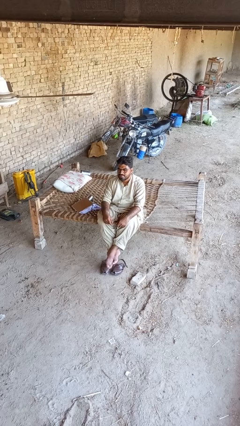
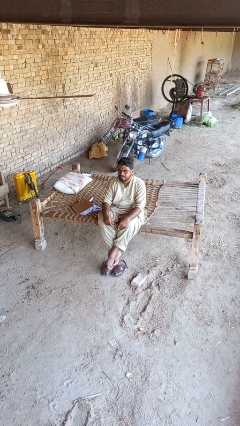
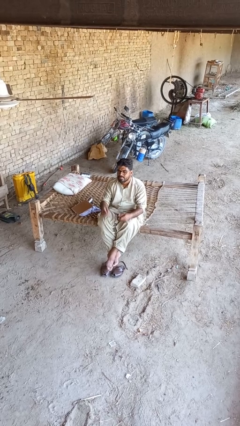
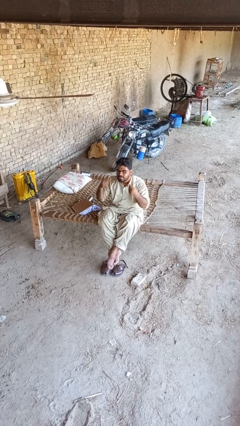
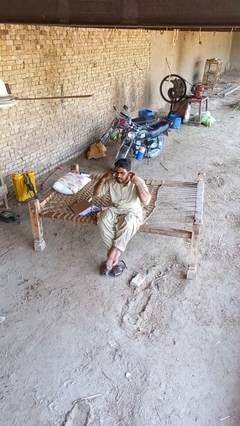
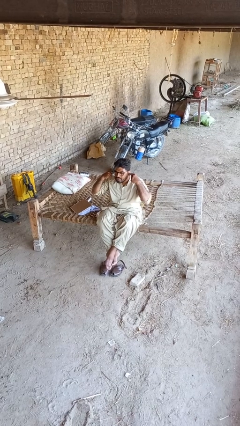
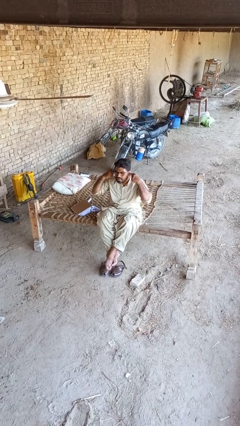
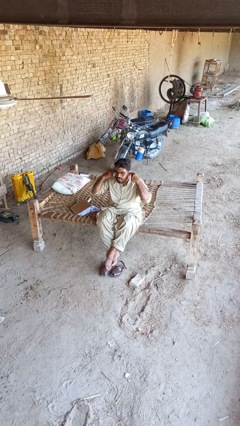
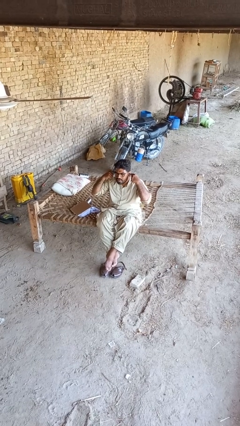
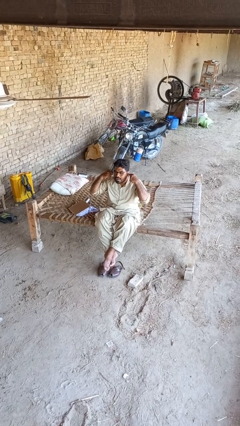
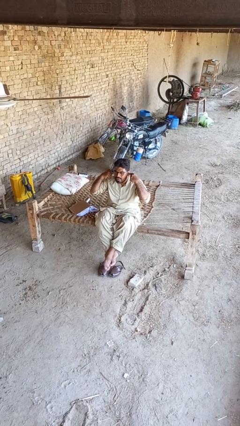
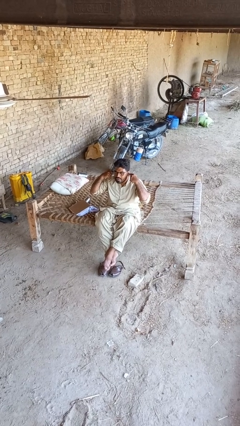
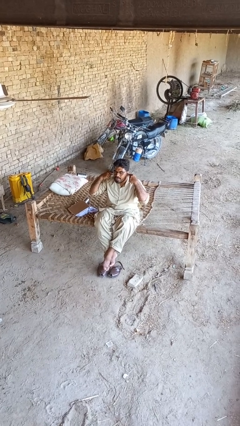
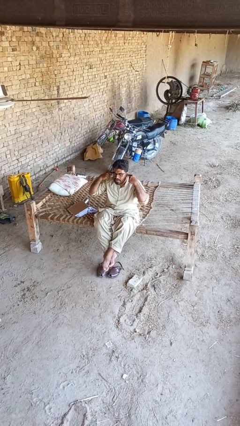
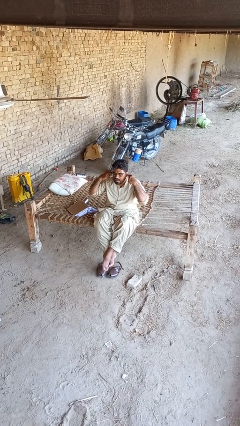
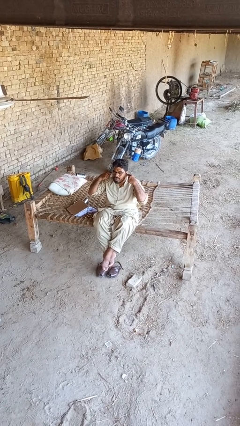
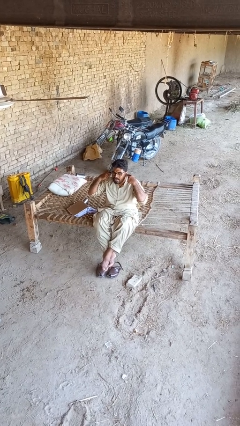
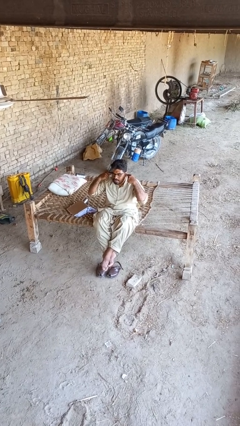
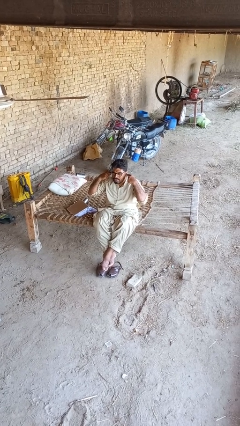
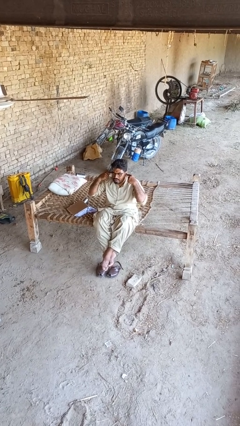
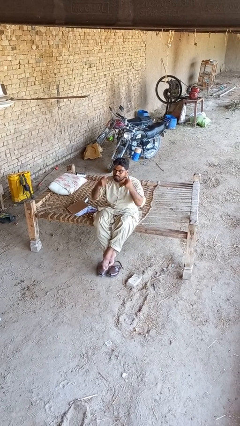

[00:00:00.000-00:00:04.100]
person puts fingers in ear

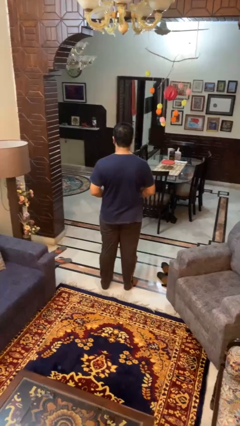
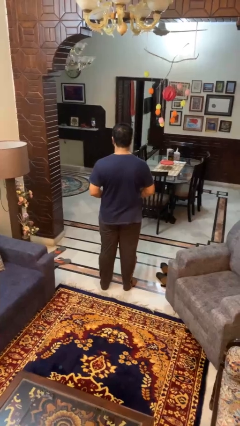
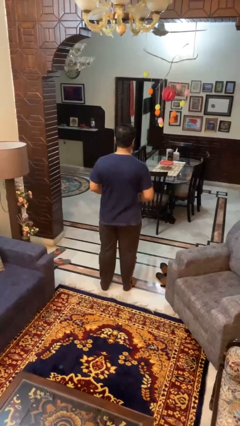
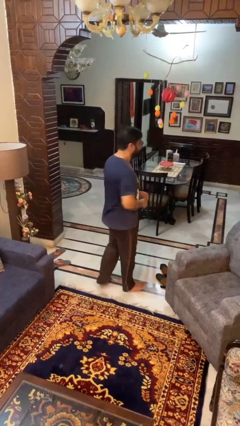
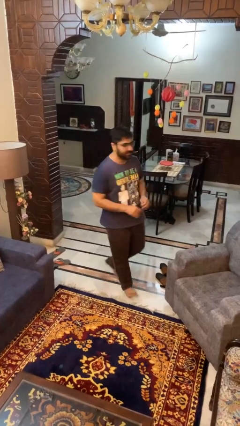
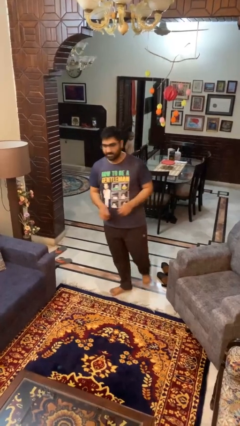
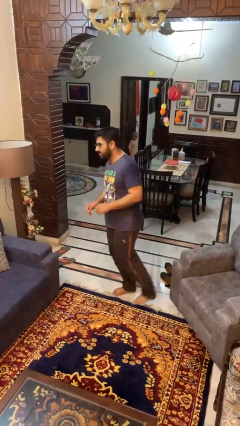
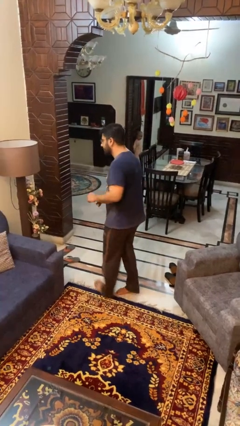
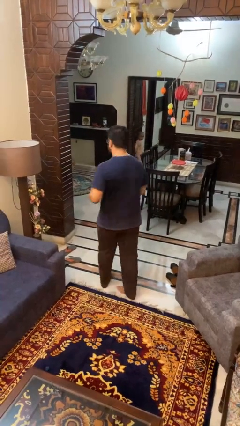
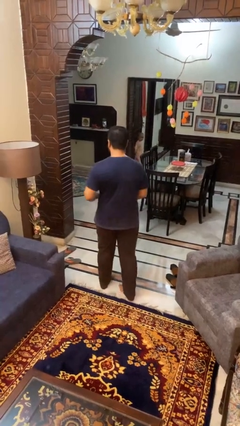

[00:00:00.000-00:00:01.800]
person twirls

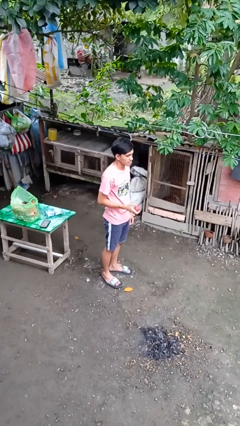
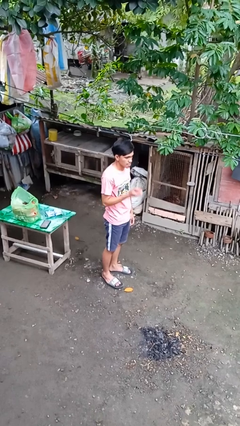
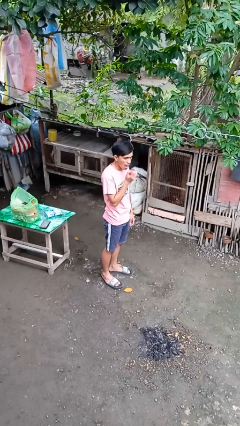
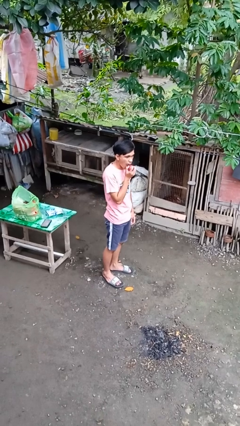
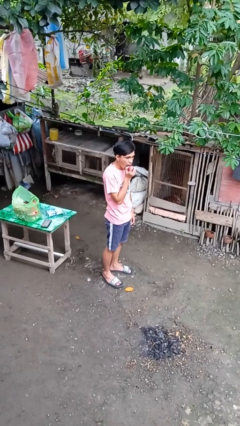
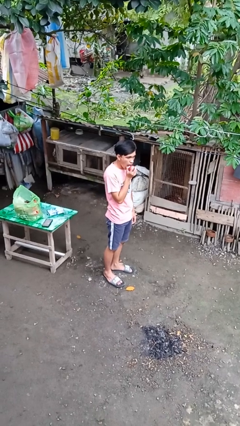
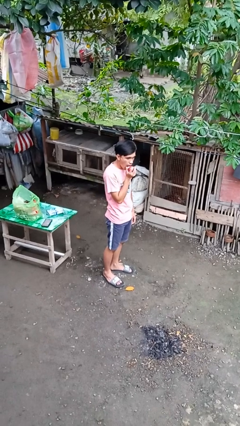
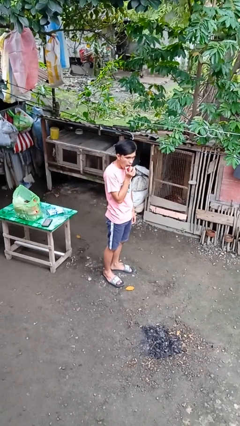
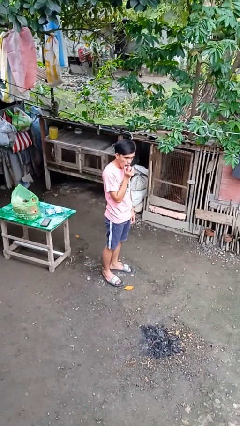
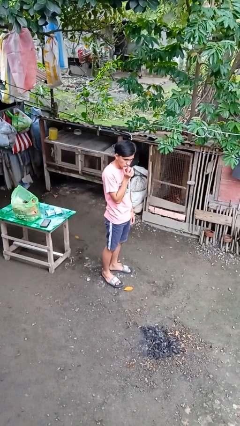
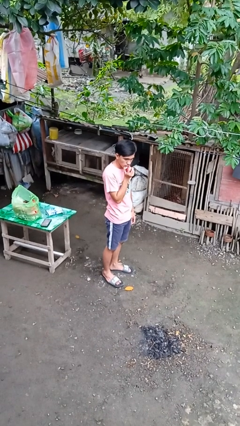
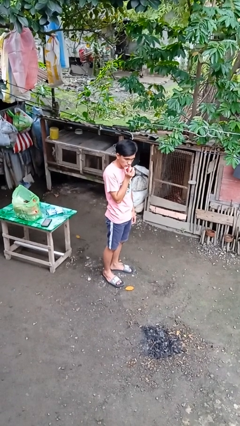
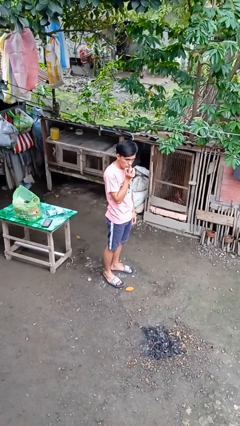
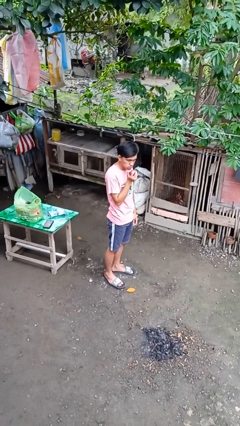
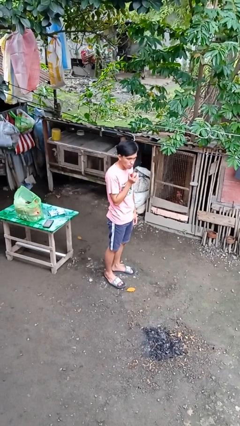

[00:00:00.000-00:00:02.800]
person eats apple

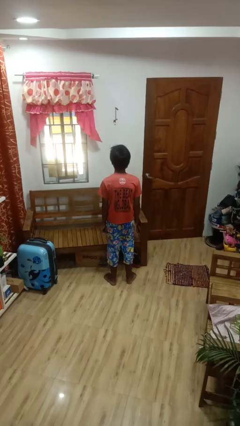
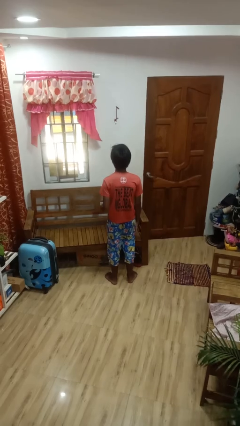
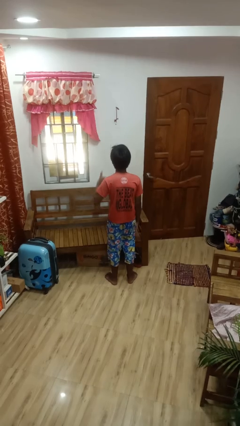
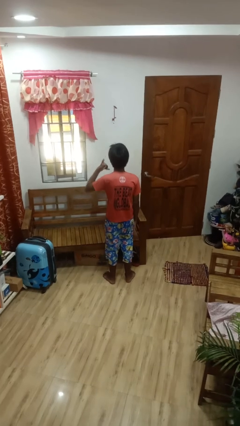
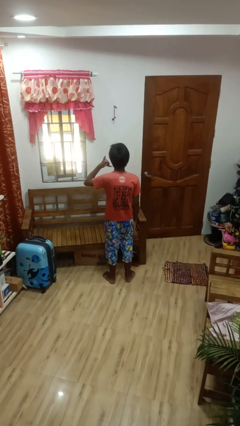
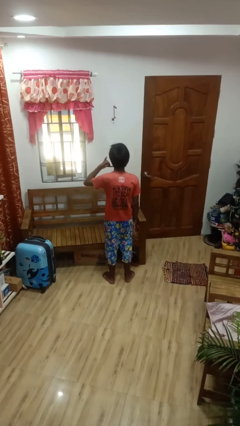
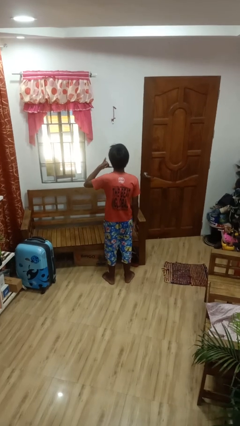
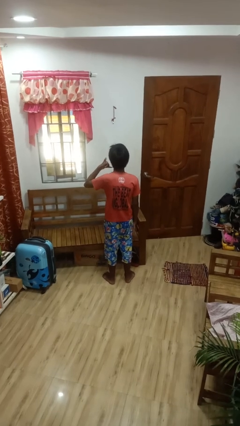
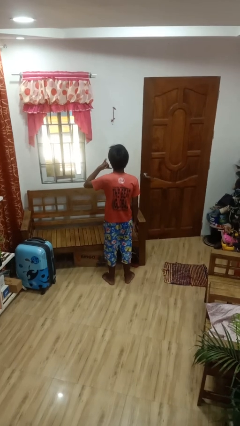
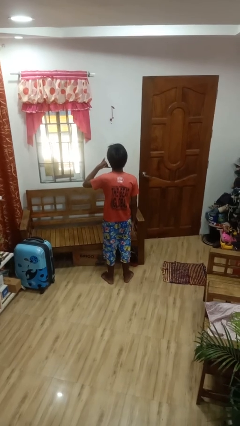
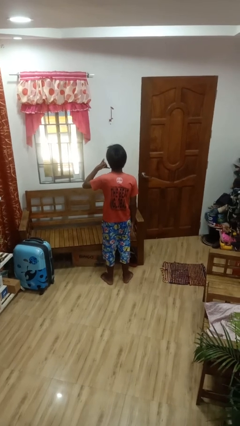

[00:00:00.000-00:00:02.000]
person gestures call me

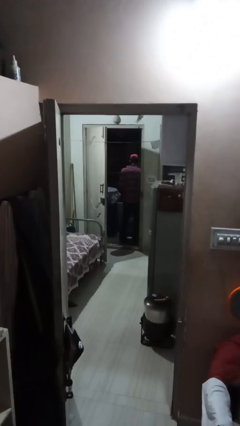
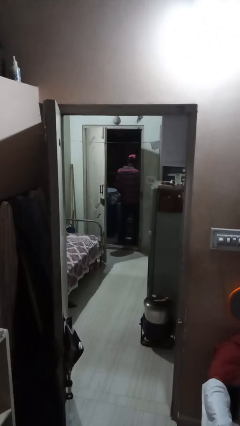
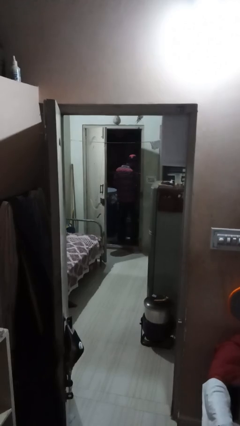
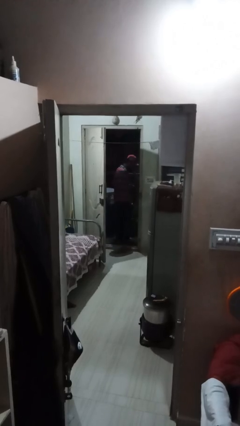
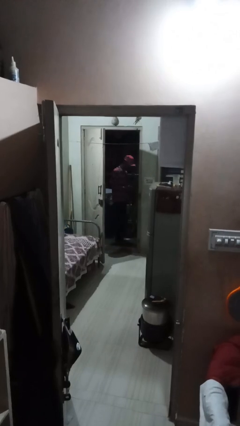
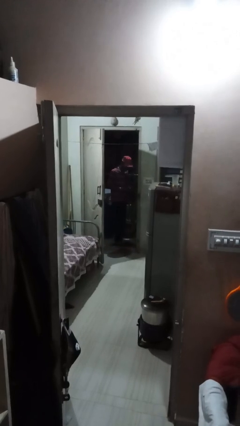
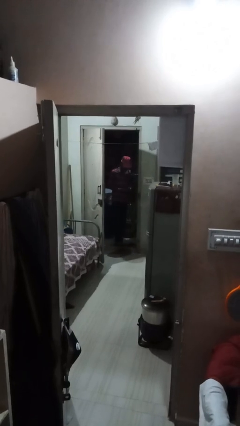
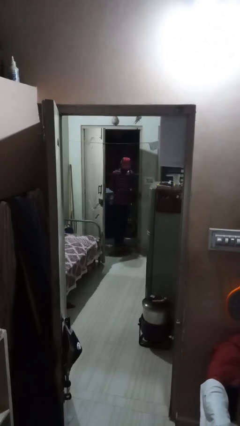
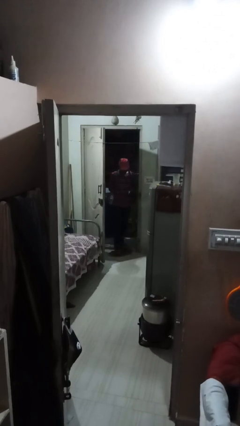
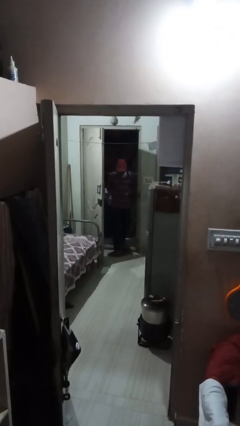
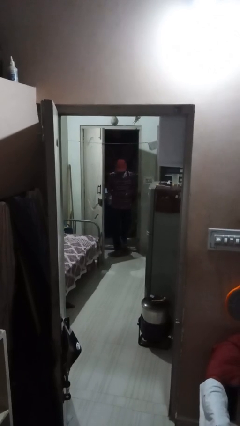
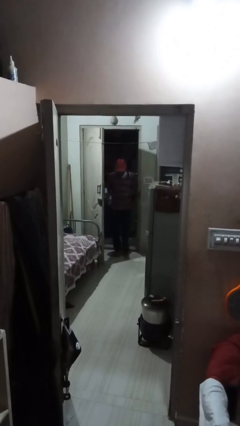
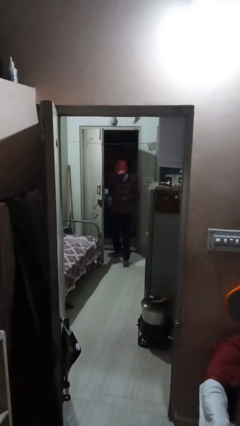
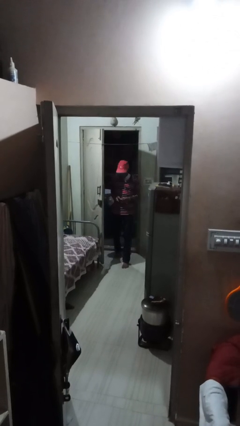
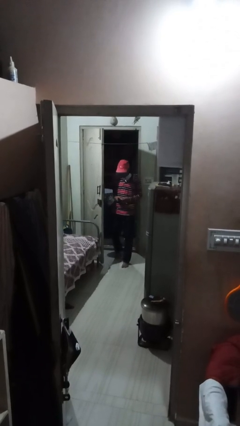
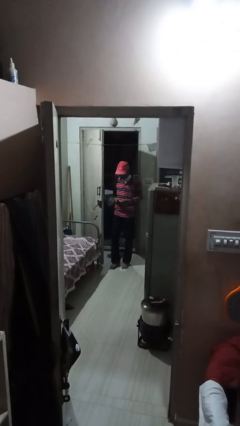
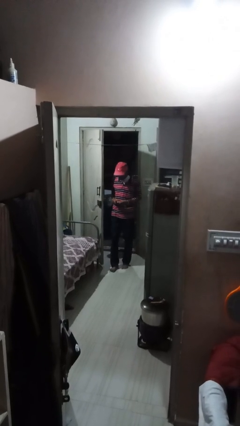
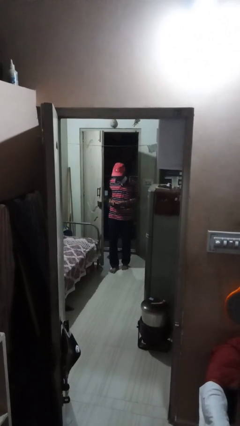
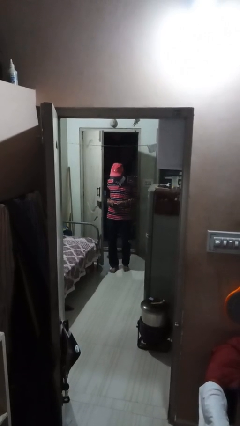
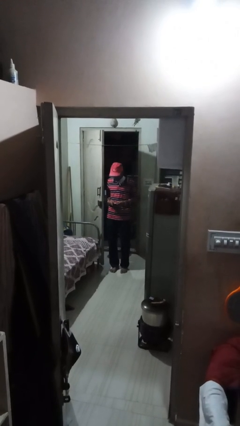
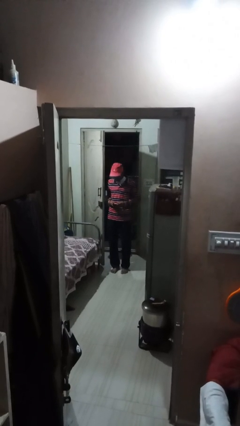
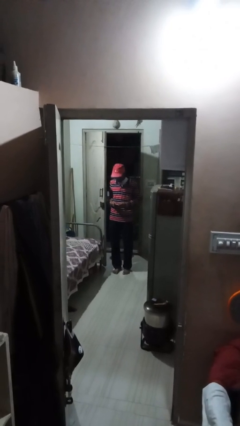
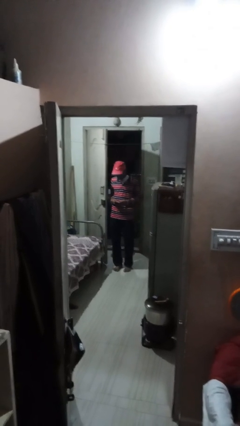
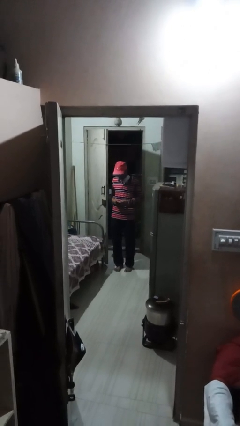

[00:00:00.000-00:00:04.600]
person enters scene through structure

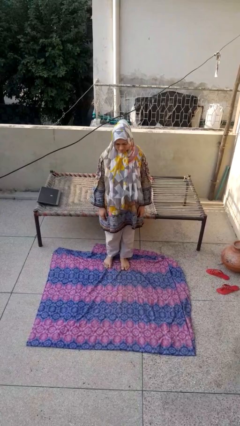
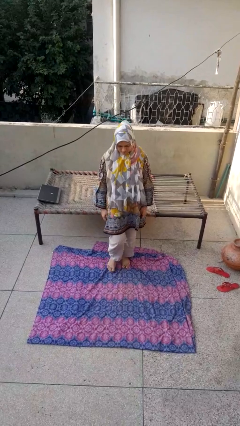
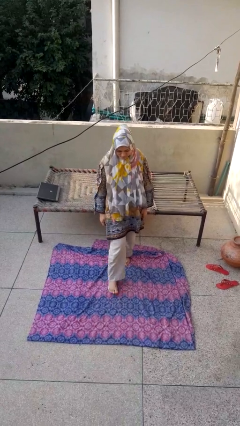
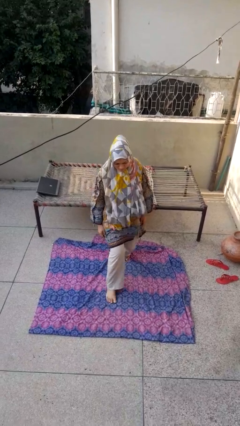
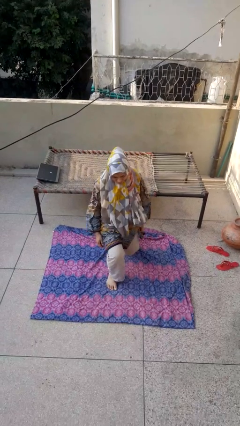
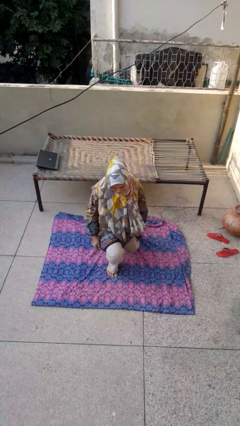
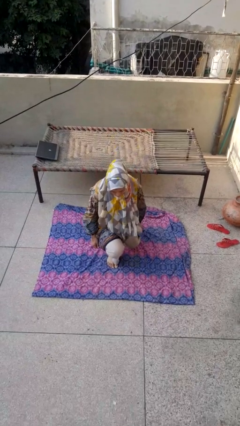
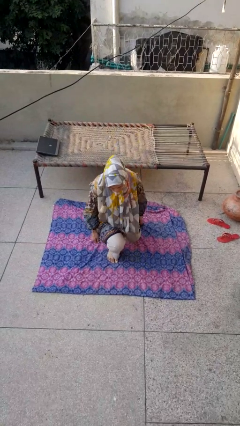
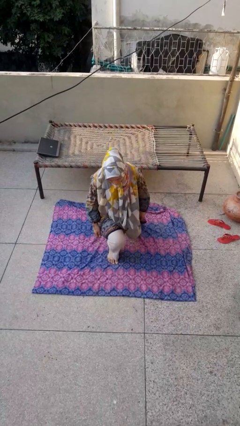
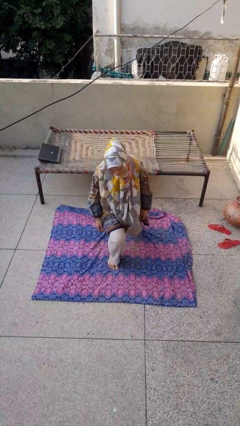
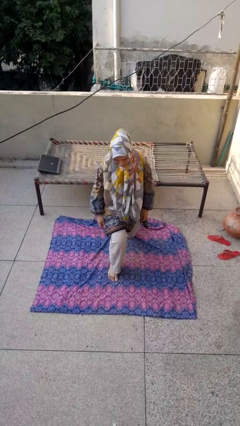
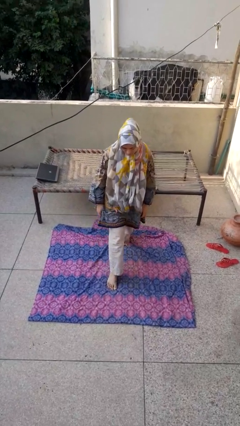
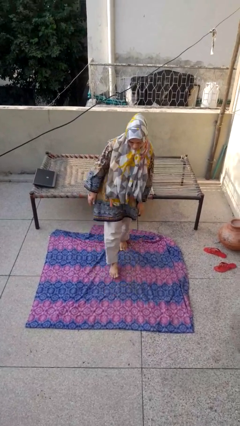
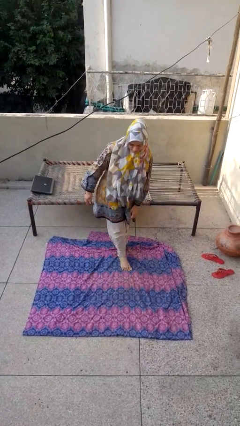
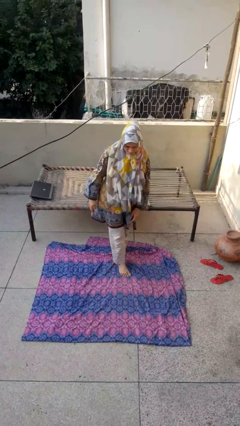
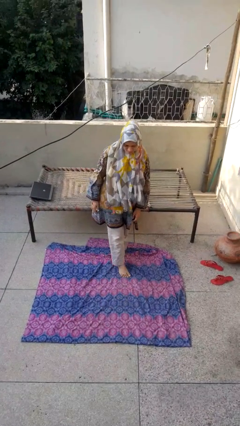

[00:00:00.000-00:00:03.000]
person exercises with lunges
